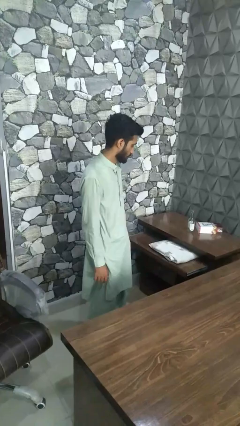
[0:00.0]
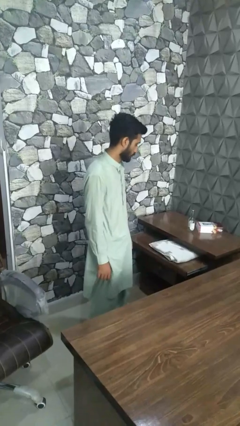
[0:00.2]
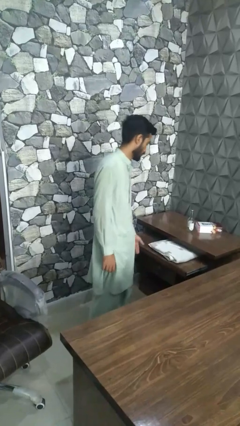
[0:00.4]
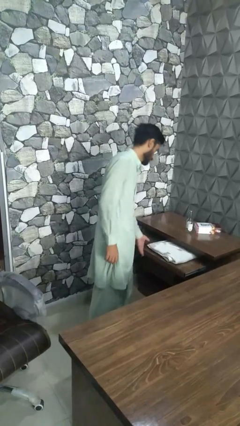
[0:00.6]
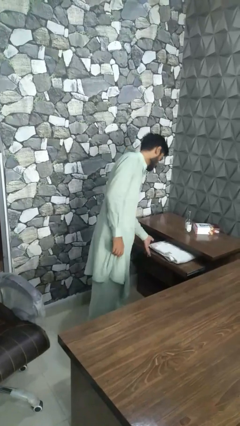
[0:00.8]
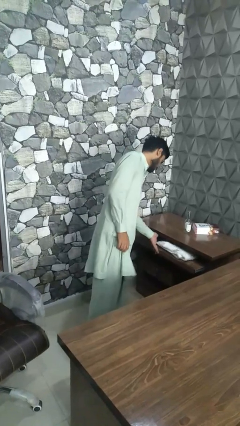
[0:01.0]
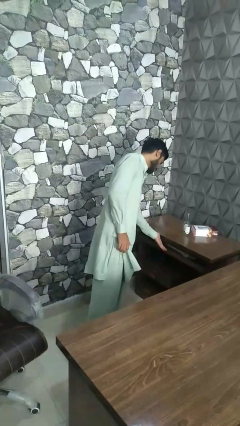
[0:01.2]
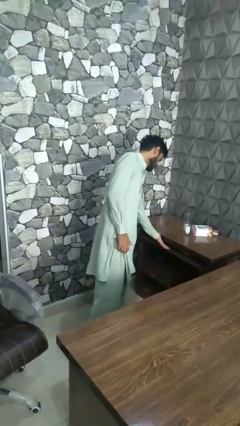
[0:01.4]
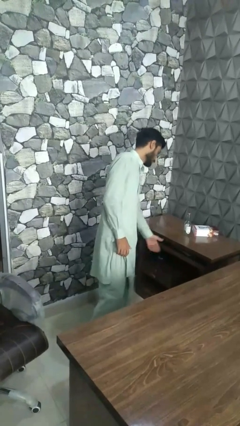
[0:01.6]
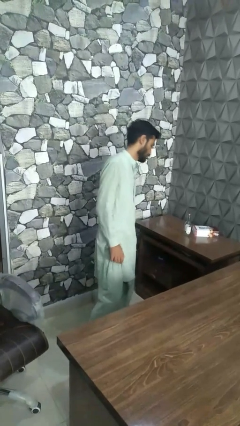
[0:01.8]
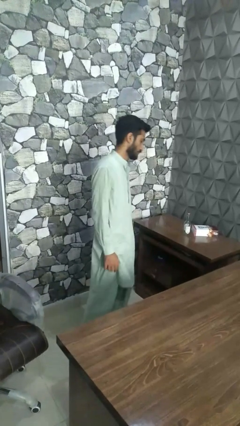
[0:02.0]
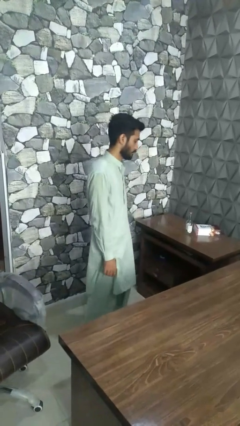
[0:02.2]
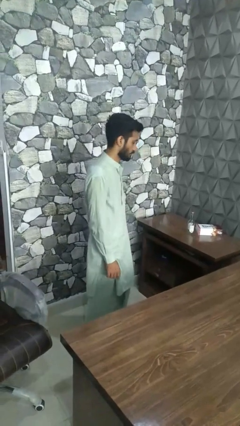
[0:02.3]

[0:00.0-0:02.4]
person closes dresser drawer

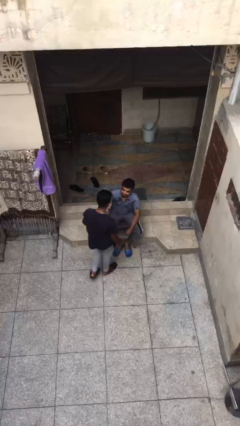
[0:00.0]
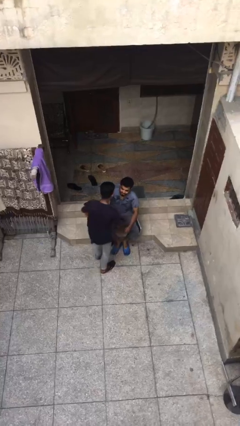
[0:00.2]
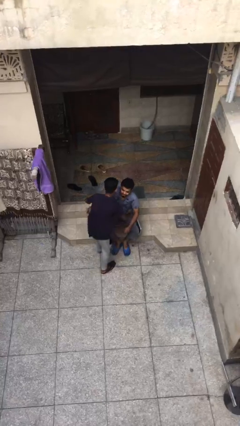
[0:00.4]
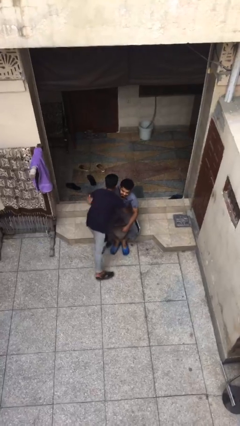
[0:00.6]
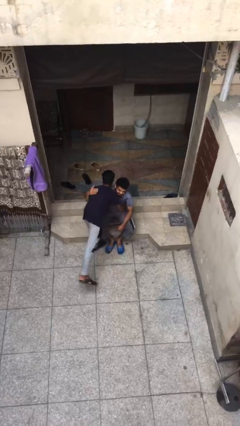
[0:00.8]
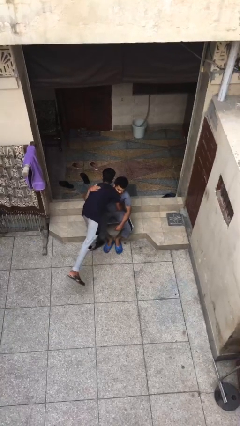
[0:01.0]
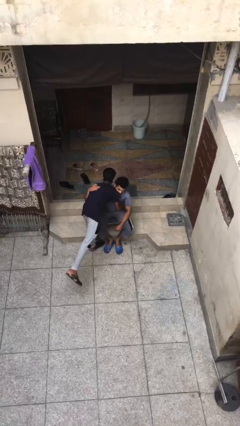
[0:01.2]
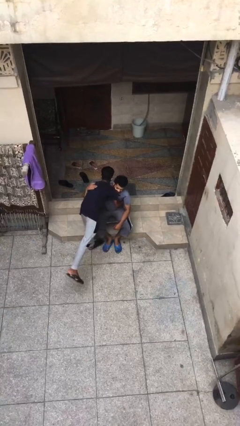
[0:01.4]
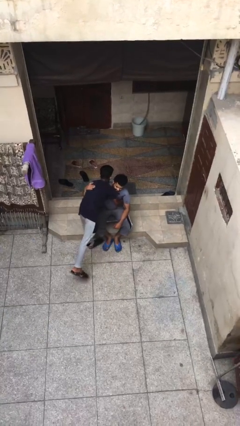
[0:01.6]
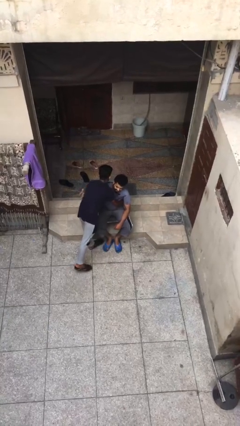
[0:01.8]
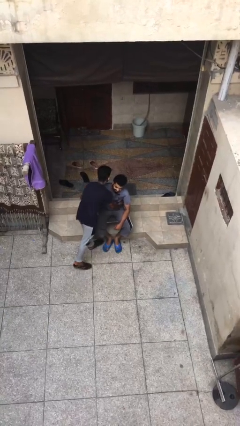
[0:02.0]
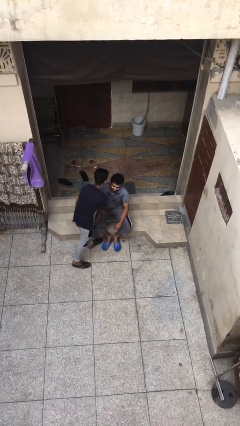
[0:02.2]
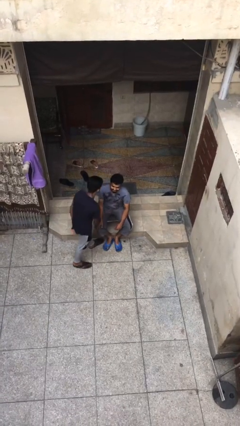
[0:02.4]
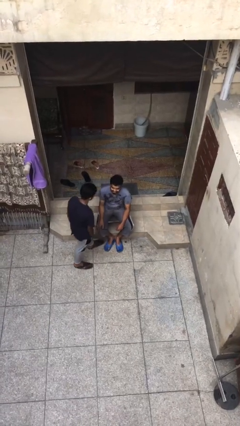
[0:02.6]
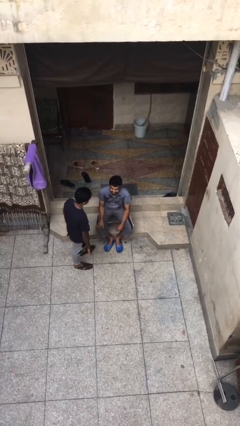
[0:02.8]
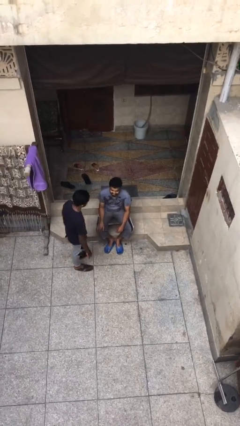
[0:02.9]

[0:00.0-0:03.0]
person embraces person

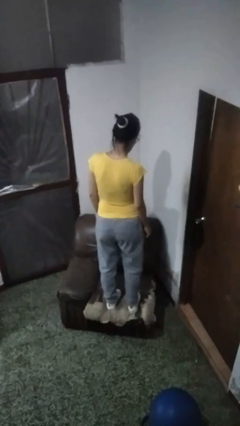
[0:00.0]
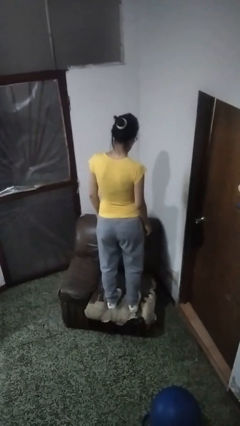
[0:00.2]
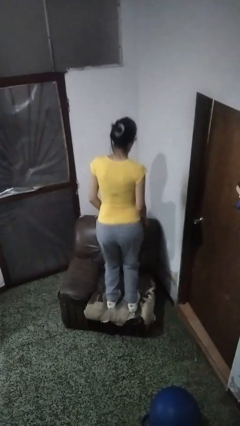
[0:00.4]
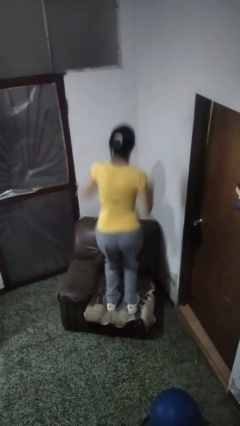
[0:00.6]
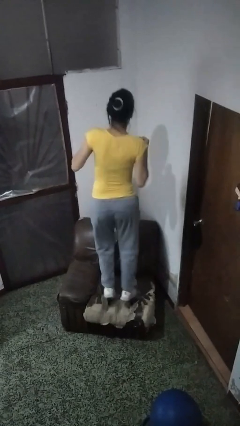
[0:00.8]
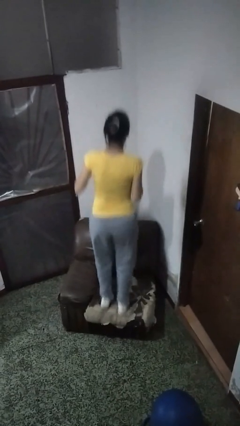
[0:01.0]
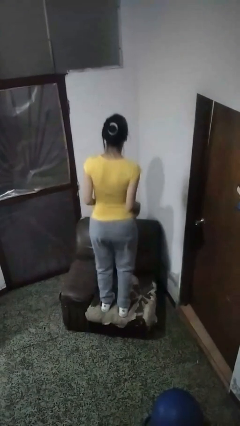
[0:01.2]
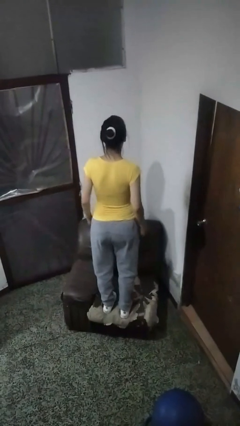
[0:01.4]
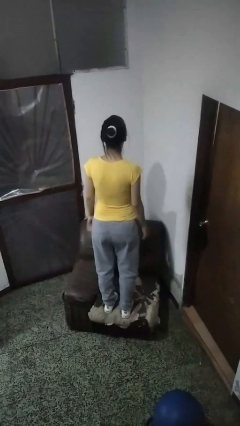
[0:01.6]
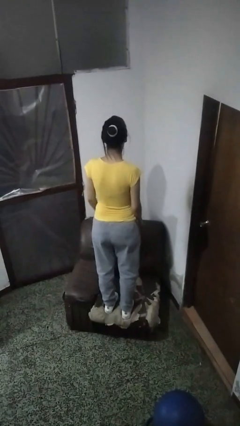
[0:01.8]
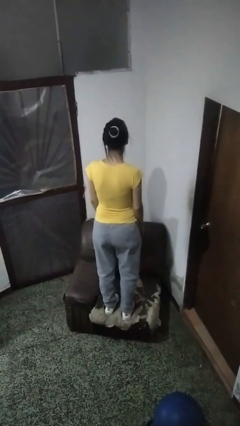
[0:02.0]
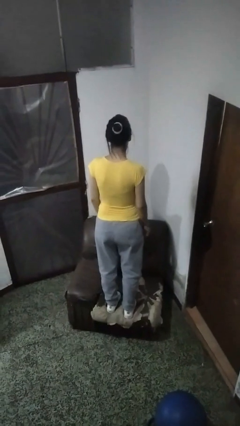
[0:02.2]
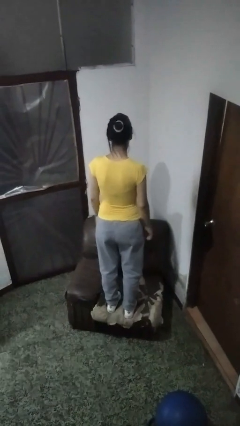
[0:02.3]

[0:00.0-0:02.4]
person jumps on couch

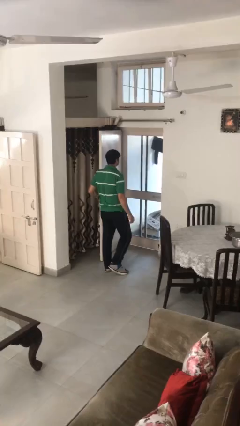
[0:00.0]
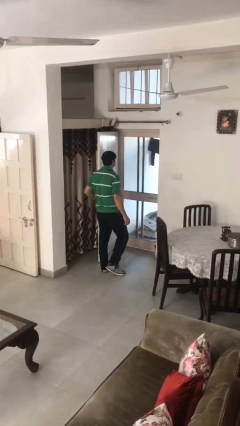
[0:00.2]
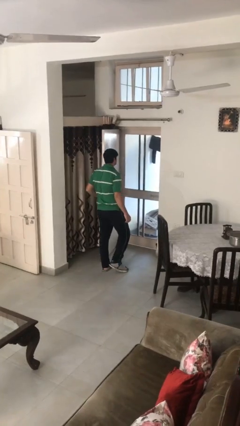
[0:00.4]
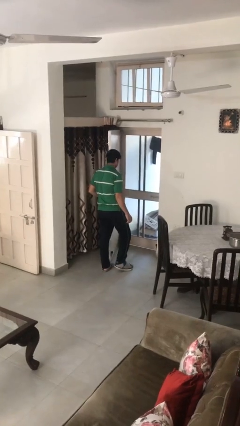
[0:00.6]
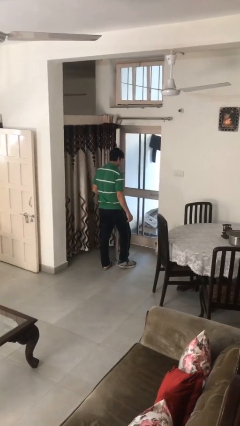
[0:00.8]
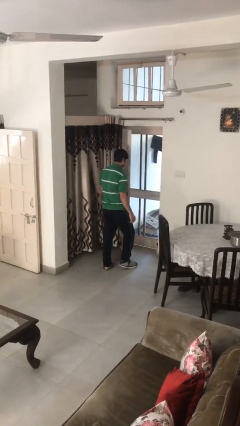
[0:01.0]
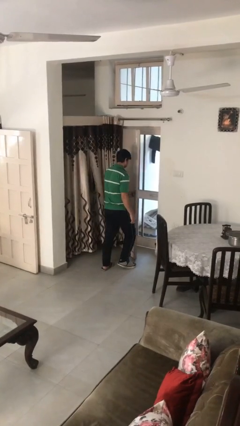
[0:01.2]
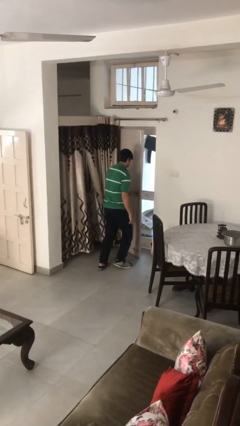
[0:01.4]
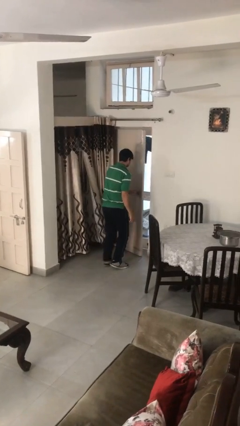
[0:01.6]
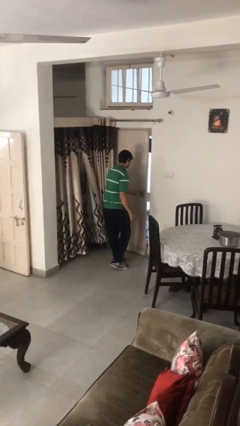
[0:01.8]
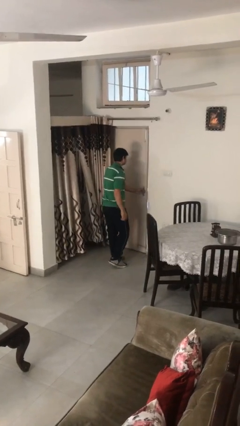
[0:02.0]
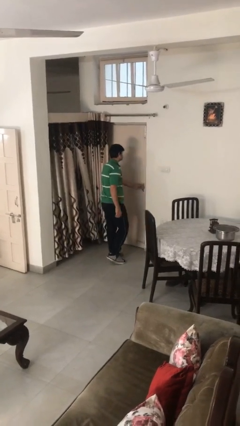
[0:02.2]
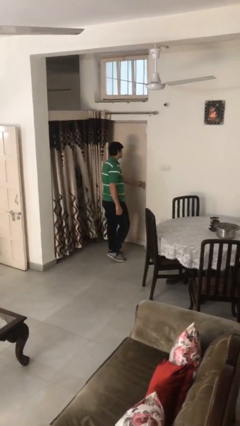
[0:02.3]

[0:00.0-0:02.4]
person closes facility door

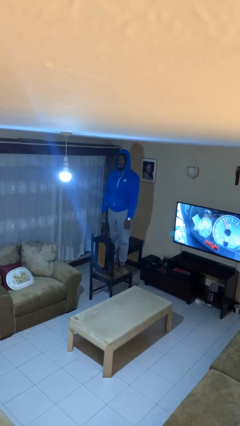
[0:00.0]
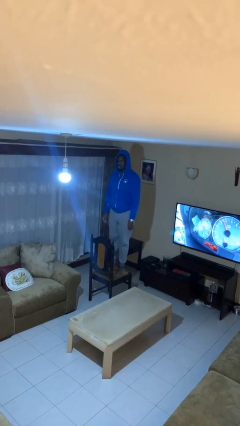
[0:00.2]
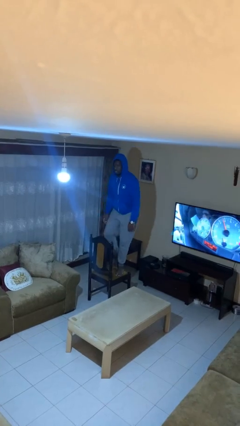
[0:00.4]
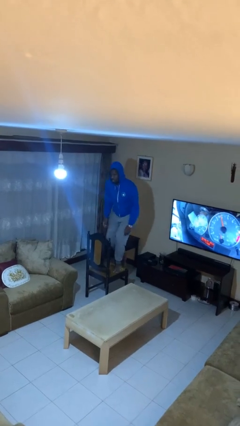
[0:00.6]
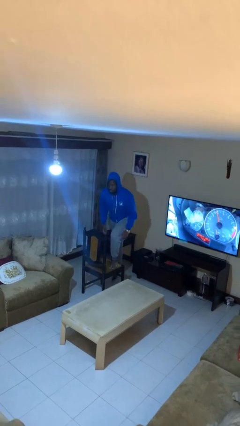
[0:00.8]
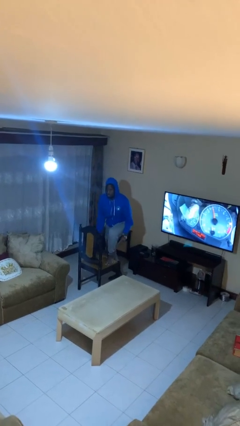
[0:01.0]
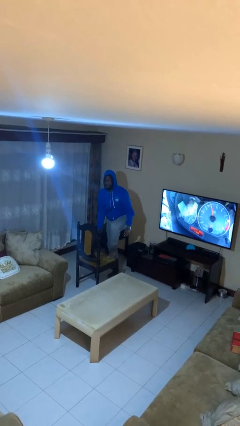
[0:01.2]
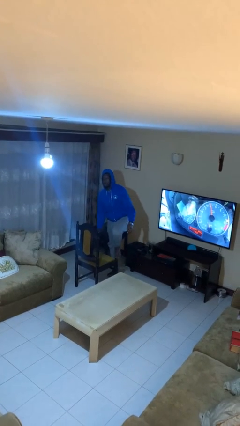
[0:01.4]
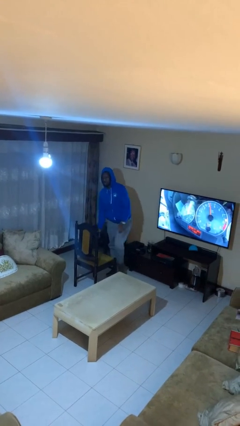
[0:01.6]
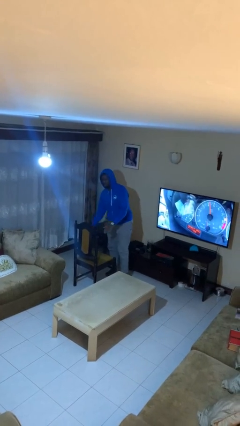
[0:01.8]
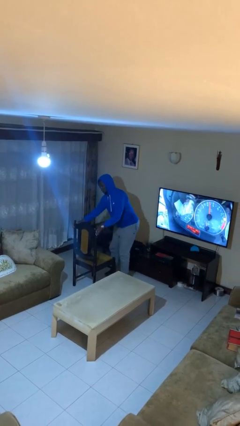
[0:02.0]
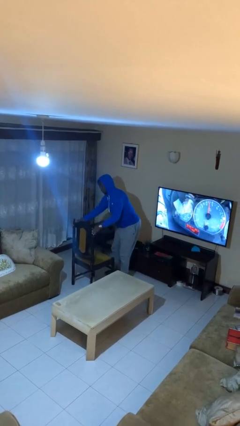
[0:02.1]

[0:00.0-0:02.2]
person climbs off chair

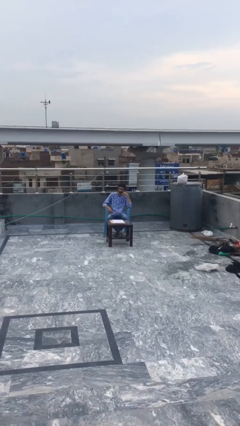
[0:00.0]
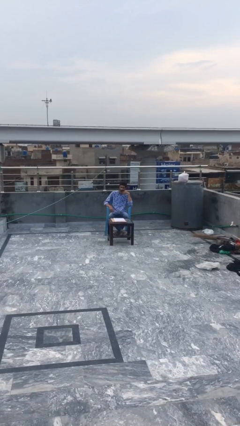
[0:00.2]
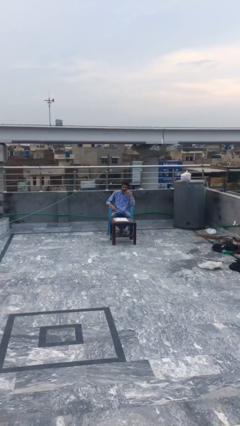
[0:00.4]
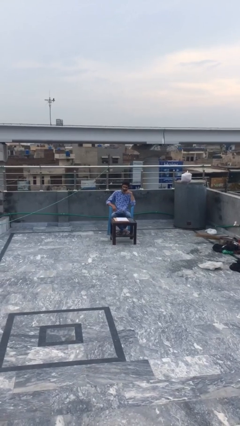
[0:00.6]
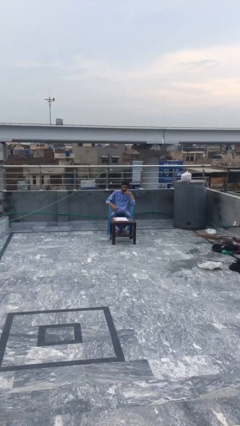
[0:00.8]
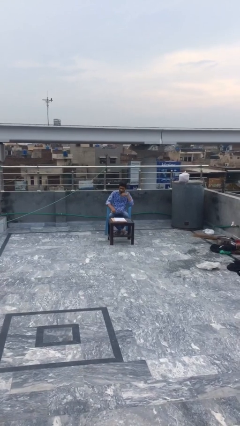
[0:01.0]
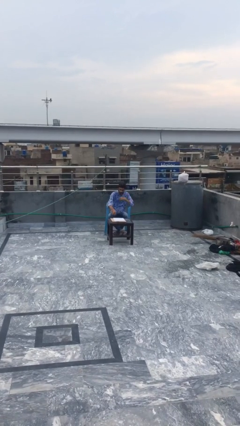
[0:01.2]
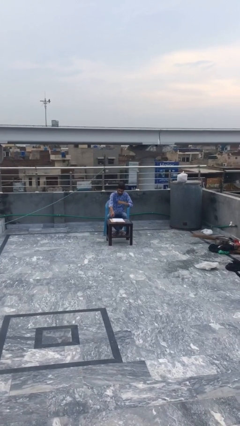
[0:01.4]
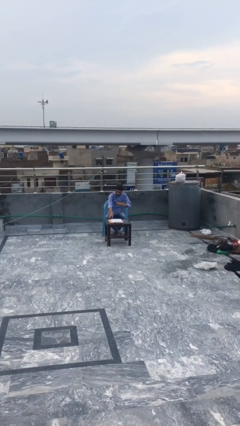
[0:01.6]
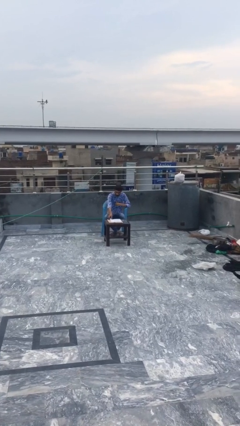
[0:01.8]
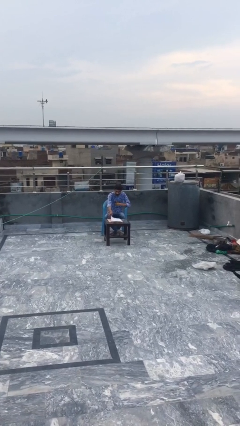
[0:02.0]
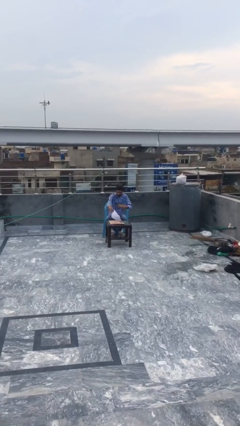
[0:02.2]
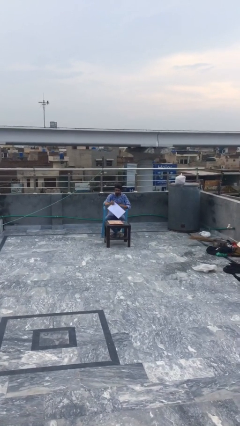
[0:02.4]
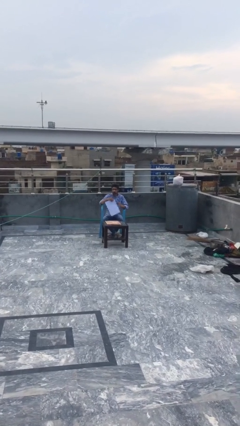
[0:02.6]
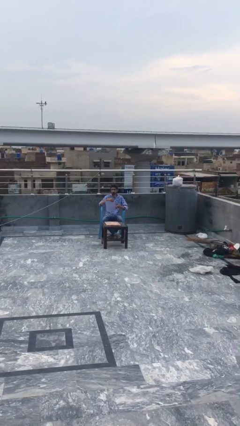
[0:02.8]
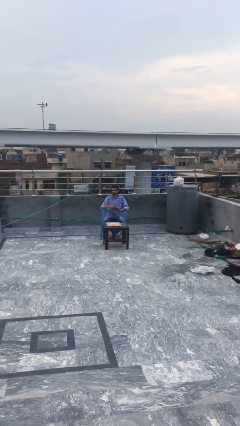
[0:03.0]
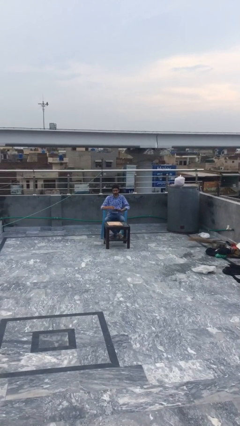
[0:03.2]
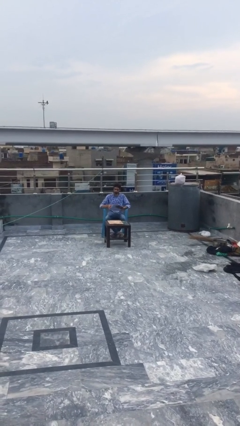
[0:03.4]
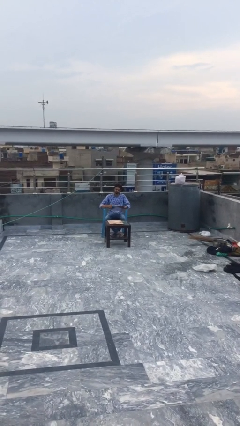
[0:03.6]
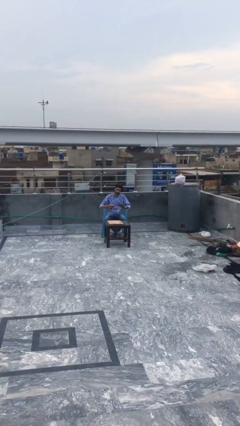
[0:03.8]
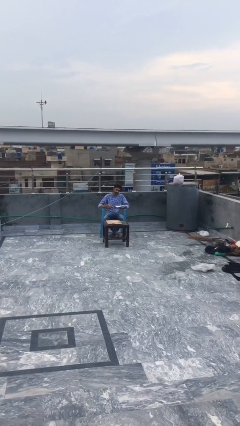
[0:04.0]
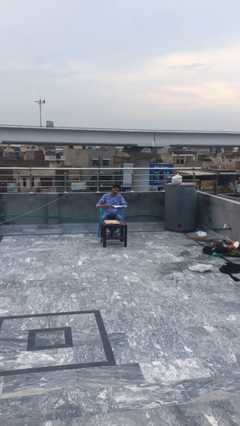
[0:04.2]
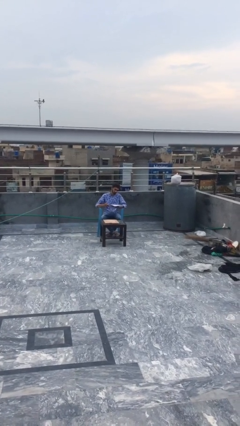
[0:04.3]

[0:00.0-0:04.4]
person picks up object from table

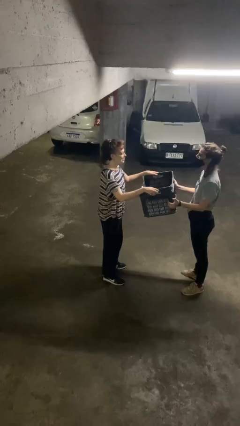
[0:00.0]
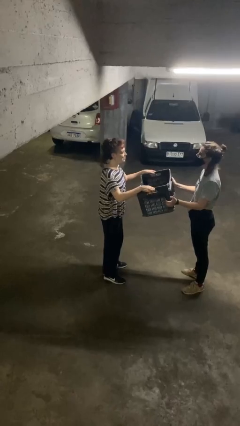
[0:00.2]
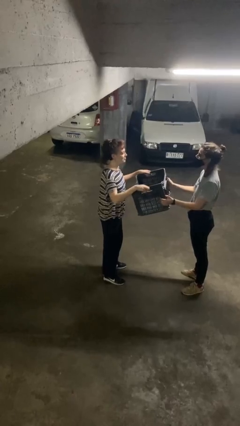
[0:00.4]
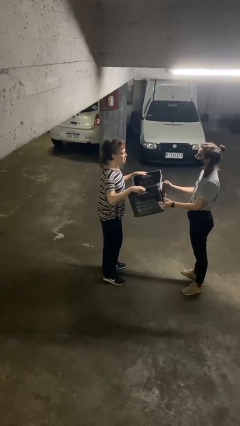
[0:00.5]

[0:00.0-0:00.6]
person transfers object to person
